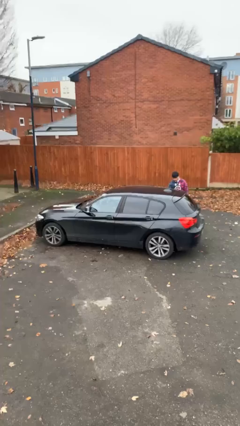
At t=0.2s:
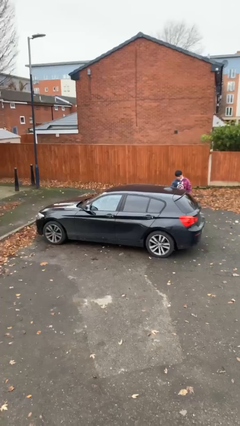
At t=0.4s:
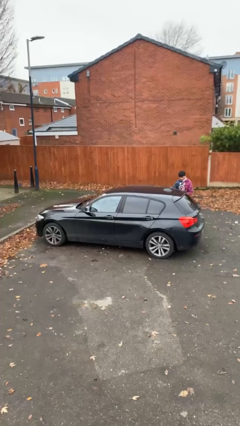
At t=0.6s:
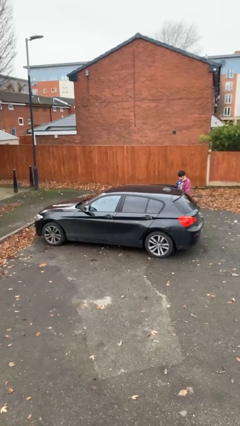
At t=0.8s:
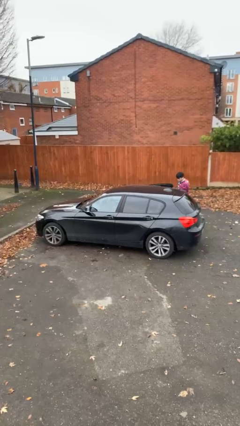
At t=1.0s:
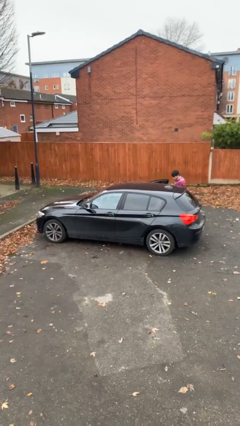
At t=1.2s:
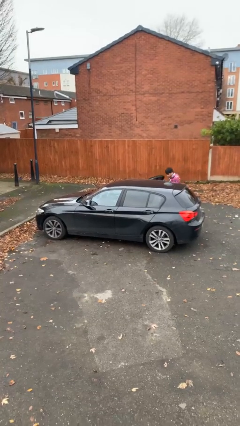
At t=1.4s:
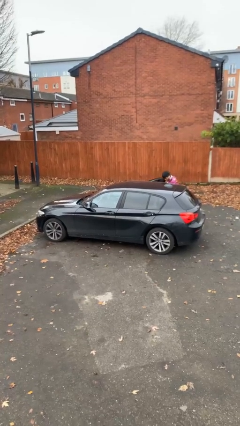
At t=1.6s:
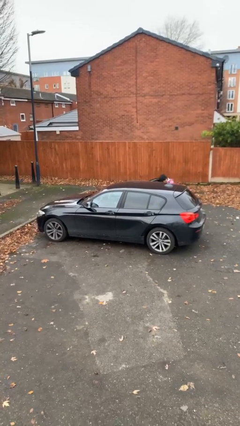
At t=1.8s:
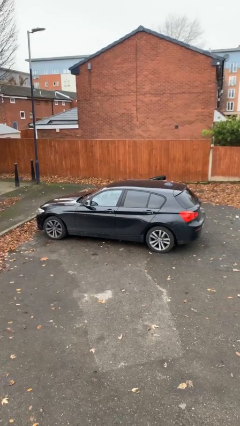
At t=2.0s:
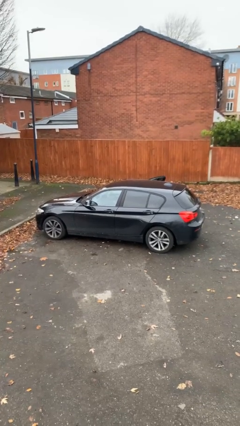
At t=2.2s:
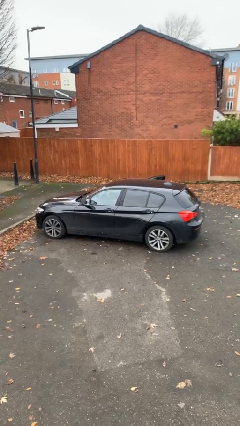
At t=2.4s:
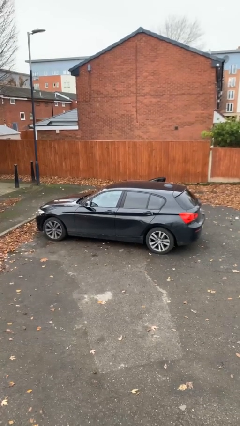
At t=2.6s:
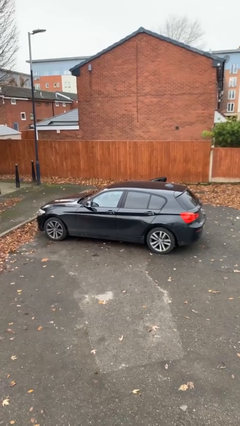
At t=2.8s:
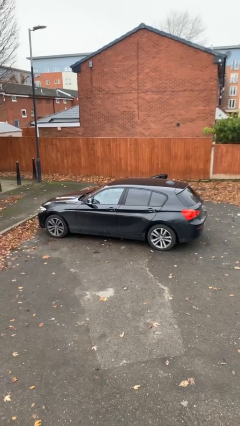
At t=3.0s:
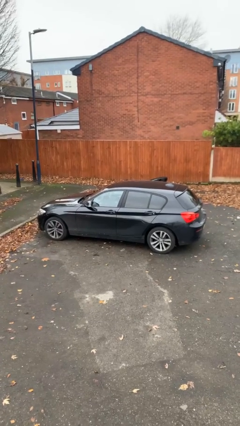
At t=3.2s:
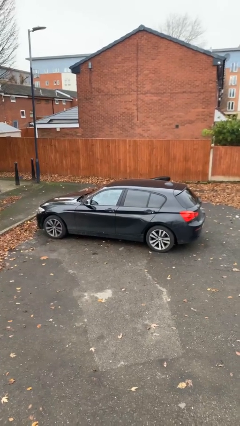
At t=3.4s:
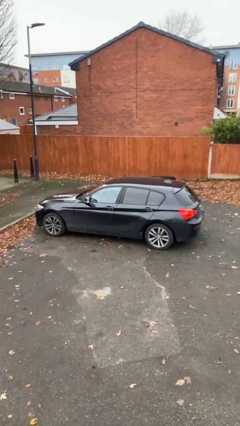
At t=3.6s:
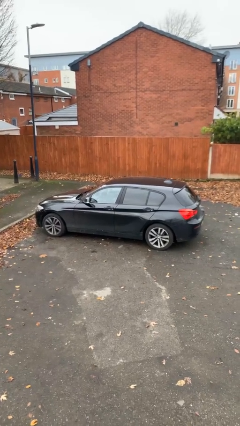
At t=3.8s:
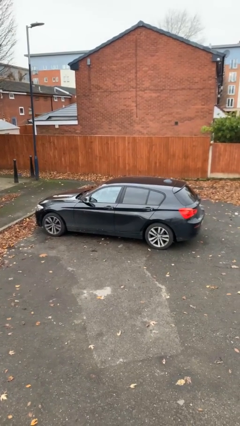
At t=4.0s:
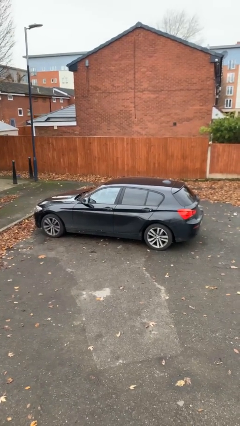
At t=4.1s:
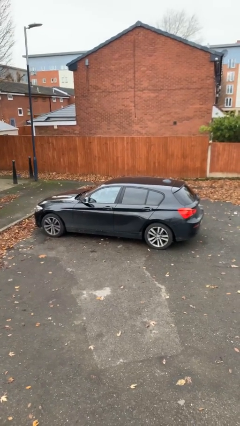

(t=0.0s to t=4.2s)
car picks up person

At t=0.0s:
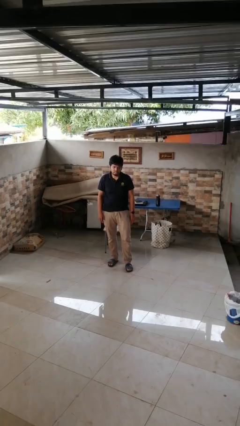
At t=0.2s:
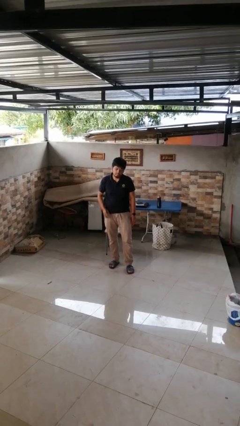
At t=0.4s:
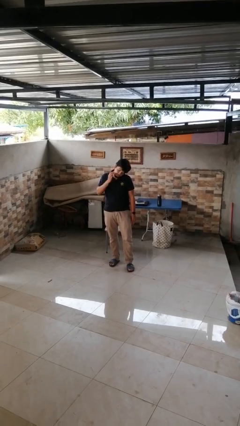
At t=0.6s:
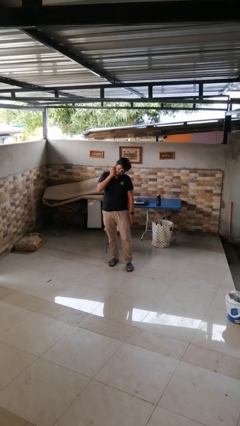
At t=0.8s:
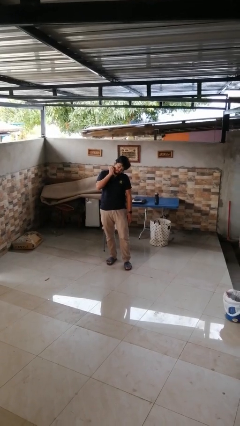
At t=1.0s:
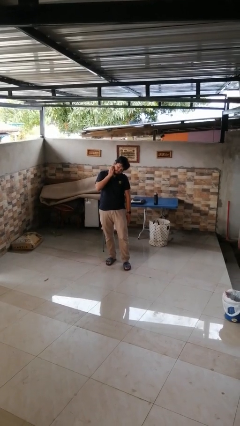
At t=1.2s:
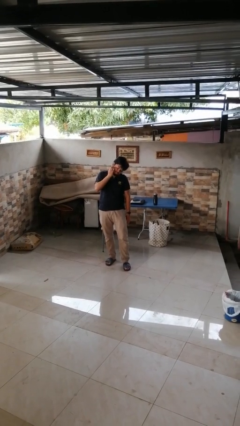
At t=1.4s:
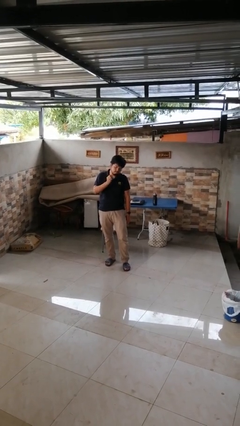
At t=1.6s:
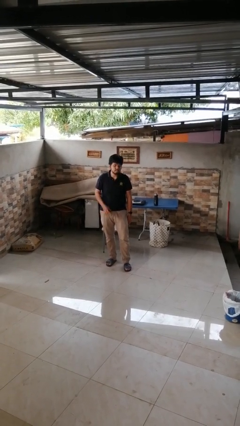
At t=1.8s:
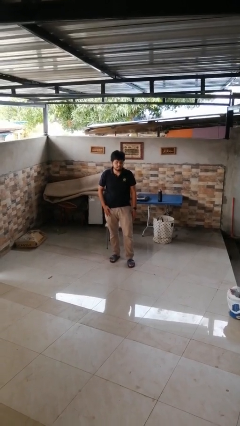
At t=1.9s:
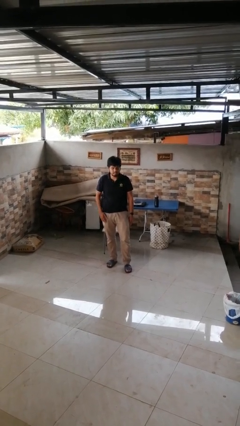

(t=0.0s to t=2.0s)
person scratches face

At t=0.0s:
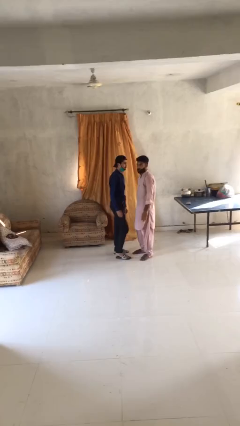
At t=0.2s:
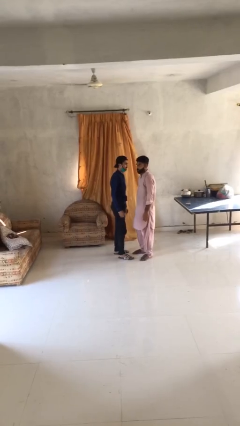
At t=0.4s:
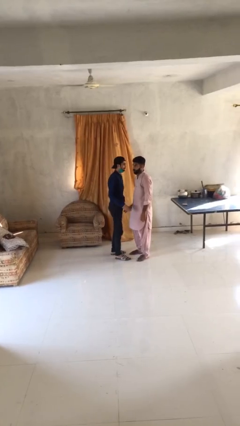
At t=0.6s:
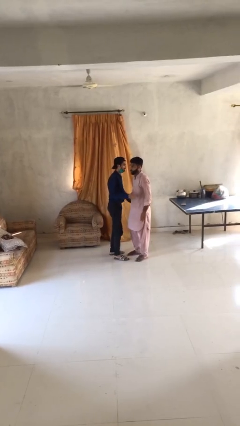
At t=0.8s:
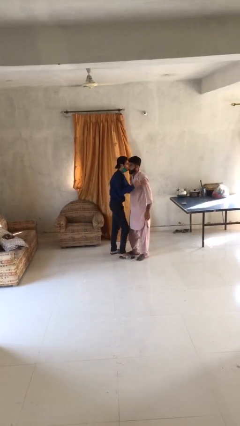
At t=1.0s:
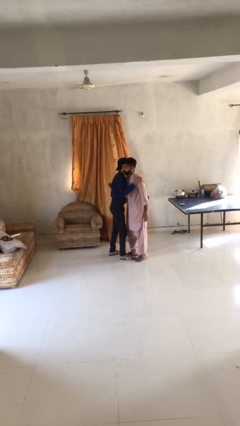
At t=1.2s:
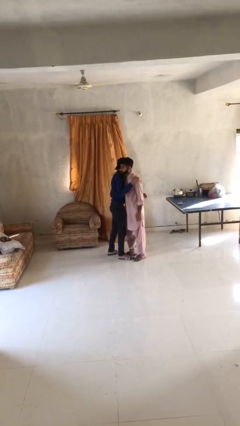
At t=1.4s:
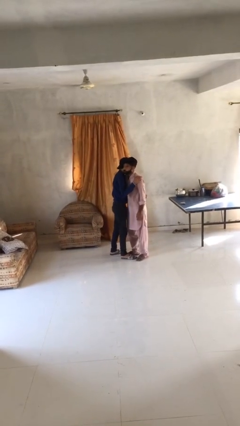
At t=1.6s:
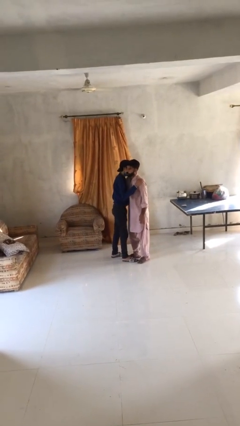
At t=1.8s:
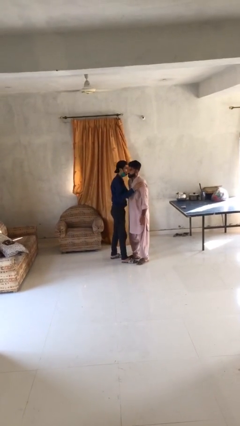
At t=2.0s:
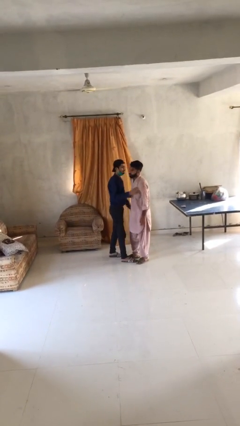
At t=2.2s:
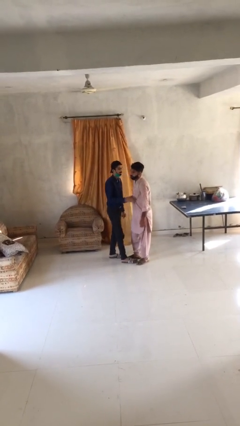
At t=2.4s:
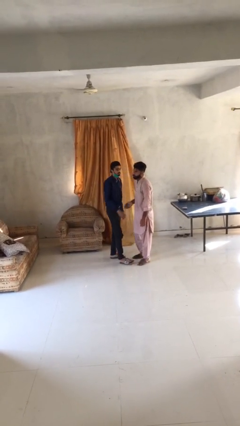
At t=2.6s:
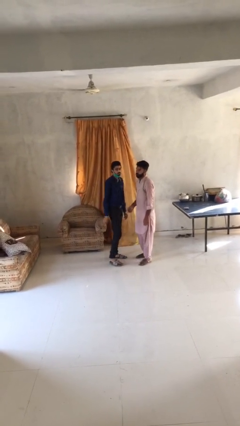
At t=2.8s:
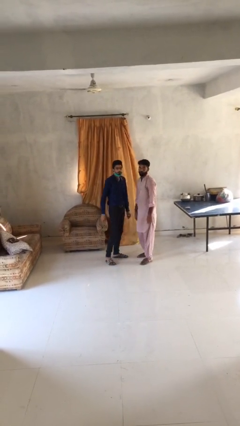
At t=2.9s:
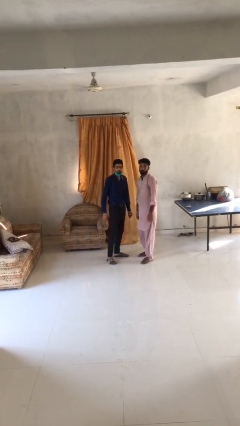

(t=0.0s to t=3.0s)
person embraces person

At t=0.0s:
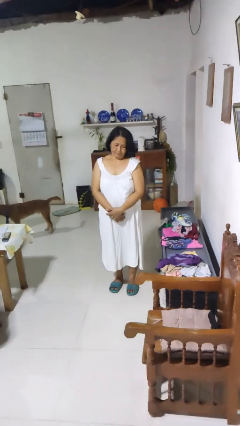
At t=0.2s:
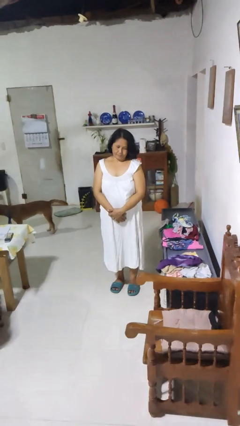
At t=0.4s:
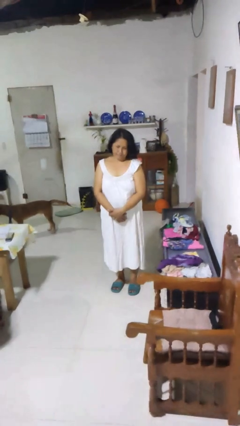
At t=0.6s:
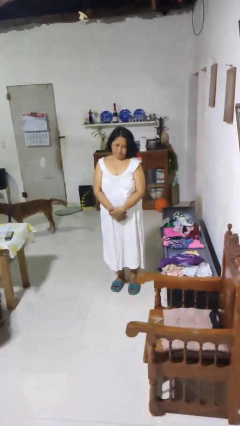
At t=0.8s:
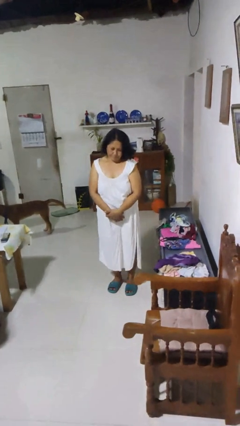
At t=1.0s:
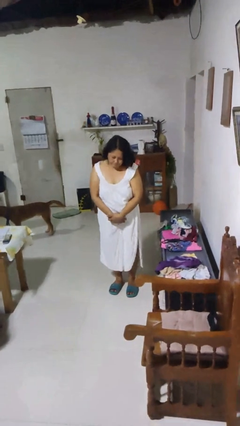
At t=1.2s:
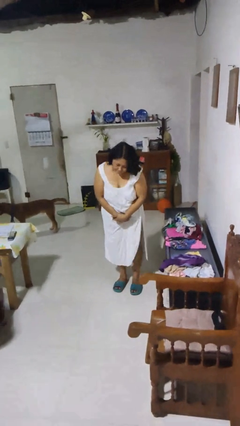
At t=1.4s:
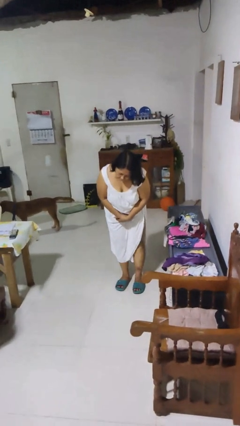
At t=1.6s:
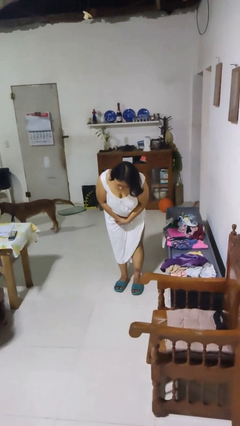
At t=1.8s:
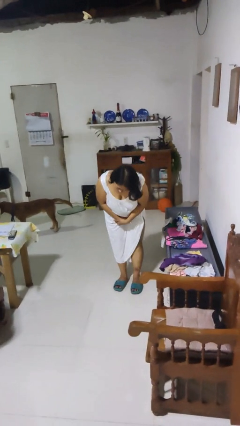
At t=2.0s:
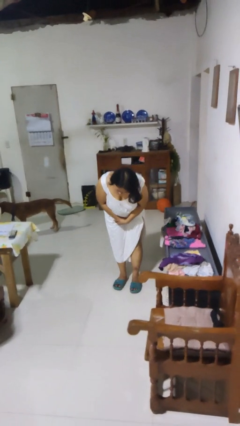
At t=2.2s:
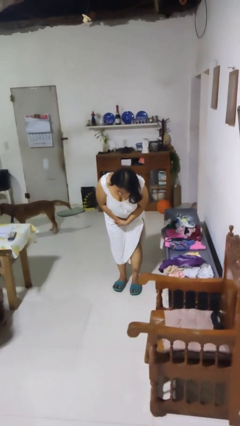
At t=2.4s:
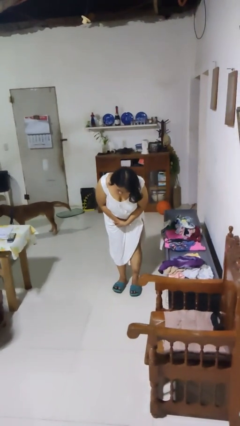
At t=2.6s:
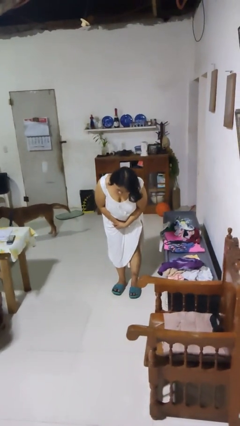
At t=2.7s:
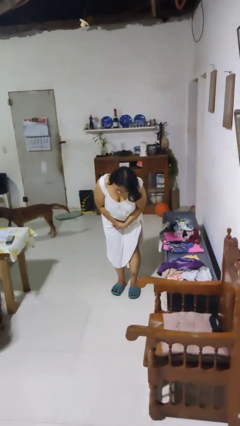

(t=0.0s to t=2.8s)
person bows

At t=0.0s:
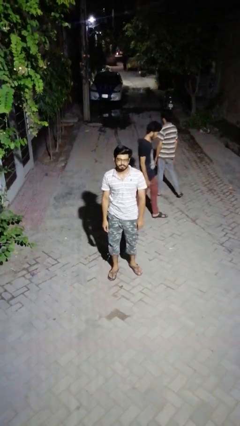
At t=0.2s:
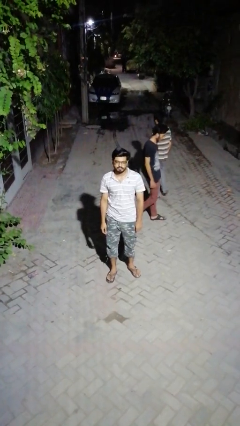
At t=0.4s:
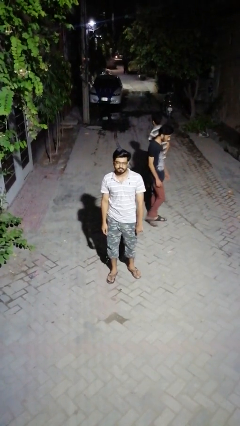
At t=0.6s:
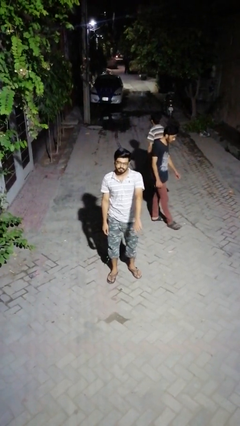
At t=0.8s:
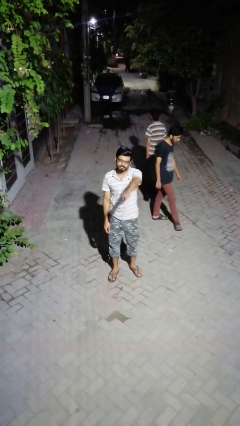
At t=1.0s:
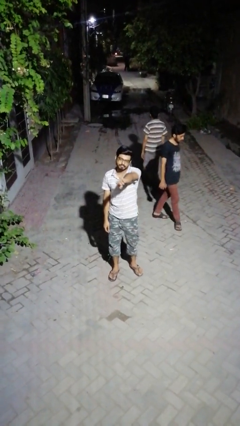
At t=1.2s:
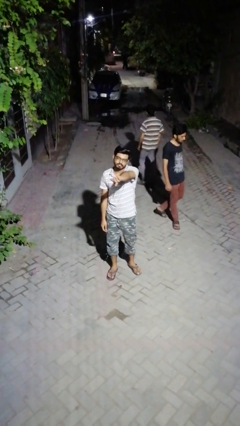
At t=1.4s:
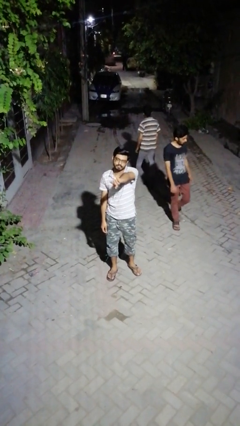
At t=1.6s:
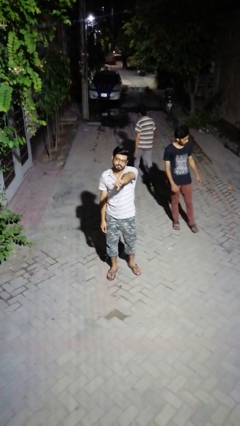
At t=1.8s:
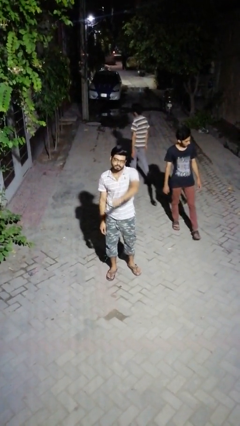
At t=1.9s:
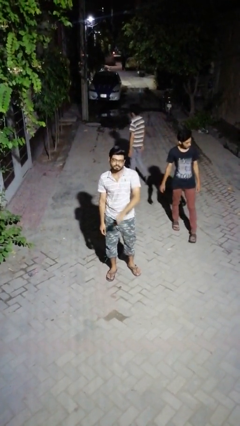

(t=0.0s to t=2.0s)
person points at person

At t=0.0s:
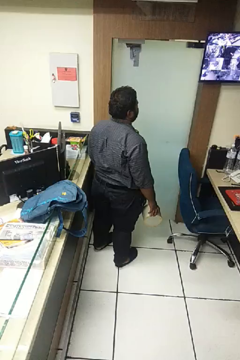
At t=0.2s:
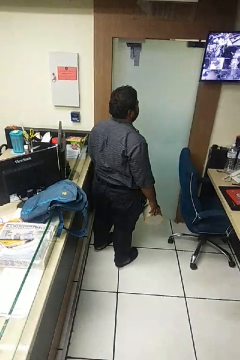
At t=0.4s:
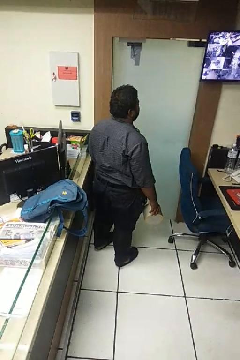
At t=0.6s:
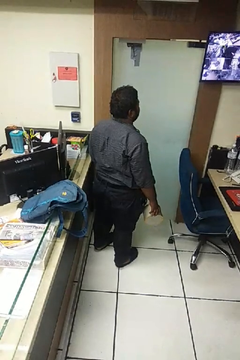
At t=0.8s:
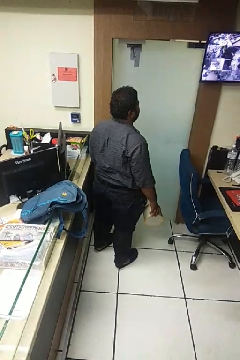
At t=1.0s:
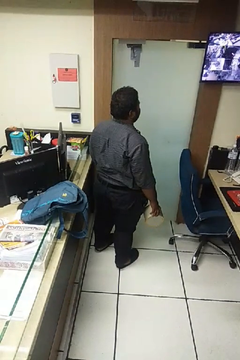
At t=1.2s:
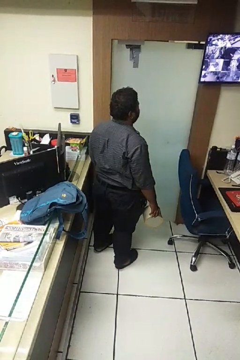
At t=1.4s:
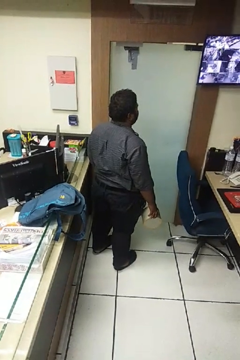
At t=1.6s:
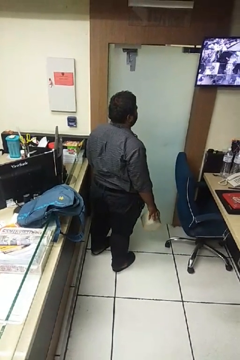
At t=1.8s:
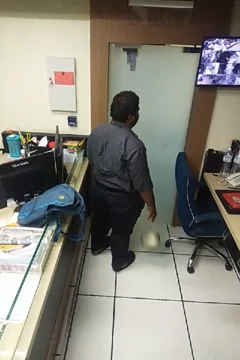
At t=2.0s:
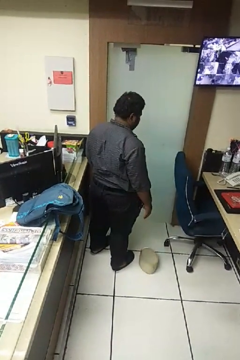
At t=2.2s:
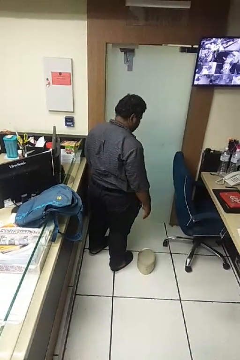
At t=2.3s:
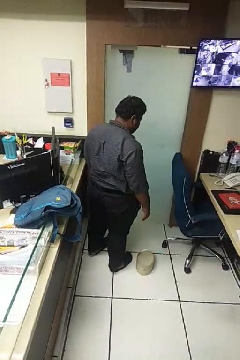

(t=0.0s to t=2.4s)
person drops object

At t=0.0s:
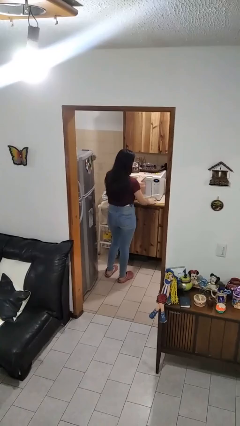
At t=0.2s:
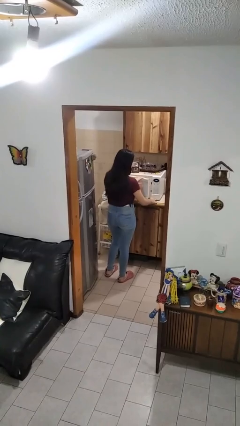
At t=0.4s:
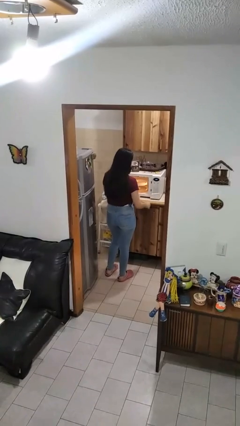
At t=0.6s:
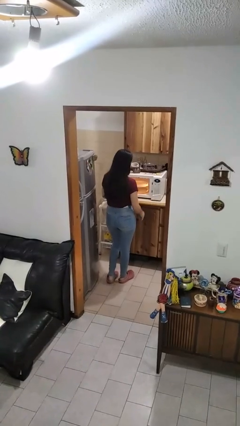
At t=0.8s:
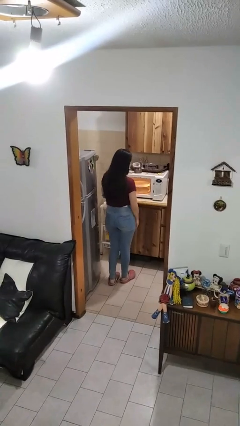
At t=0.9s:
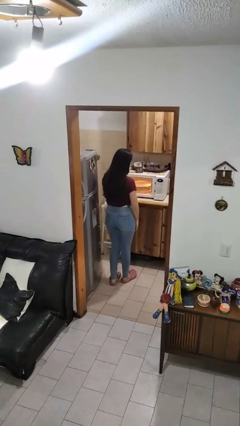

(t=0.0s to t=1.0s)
person opens microwave
